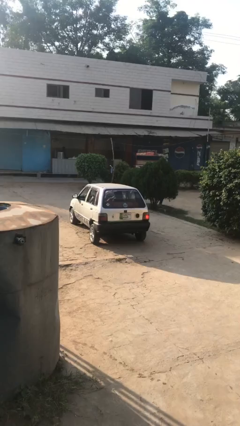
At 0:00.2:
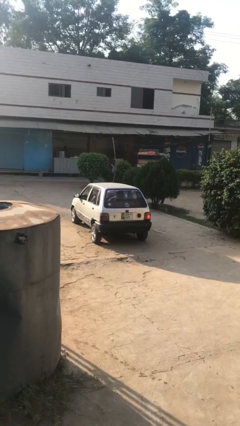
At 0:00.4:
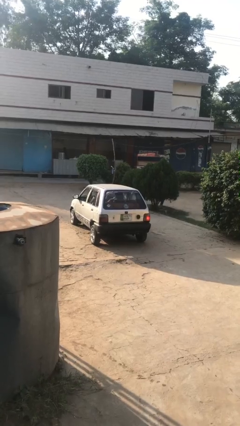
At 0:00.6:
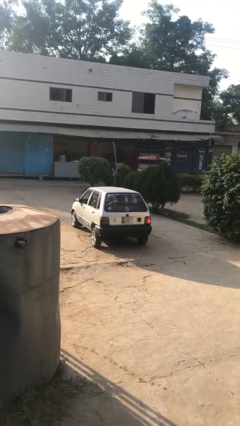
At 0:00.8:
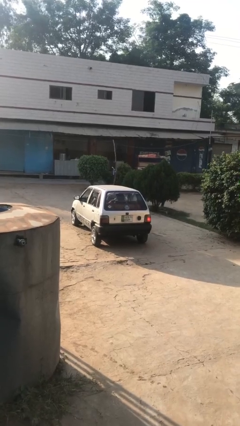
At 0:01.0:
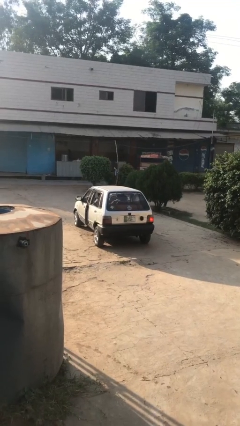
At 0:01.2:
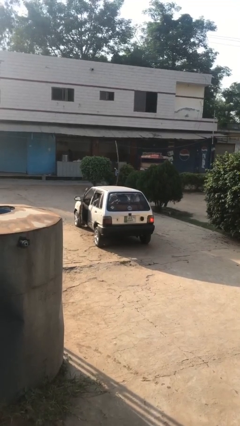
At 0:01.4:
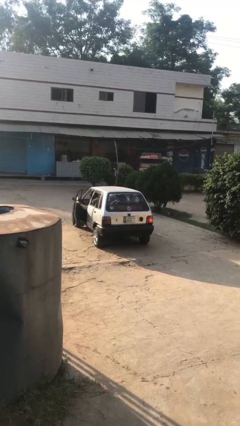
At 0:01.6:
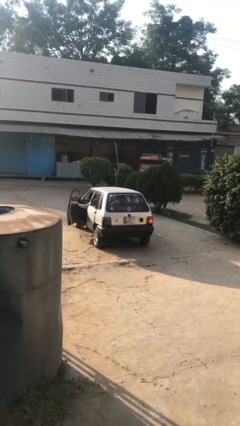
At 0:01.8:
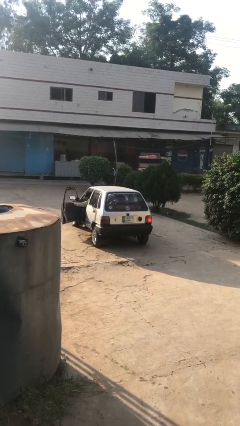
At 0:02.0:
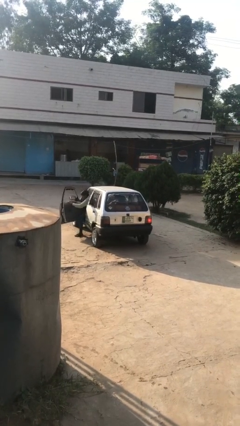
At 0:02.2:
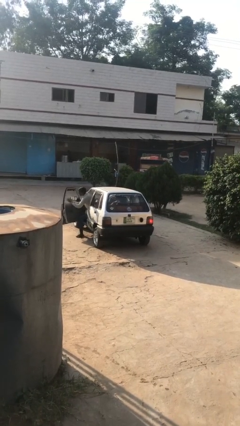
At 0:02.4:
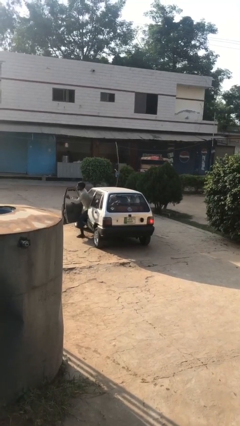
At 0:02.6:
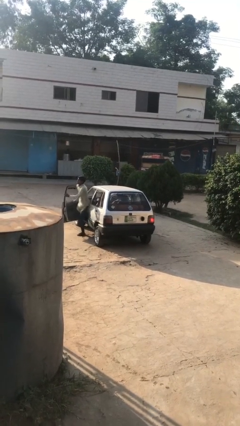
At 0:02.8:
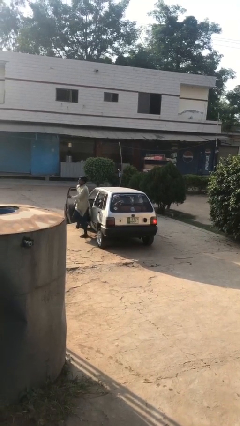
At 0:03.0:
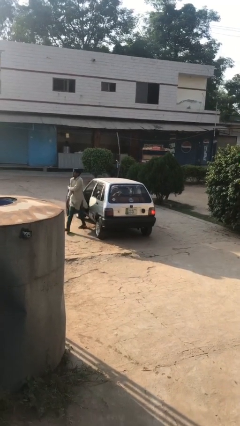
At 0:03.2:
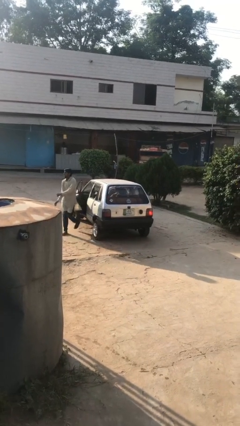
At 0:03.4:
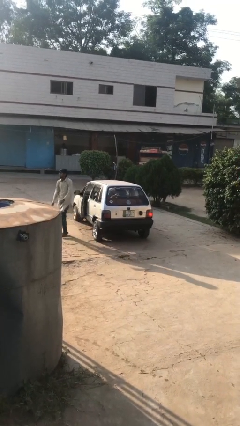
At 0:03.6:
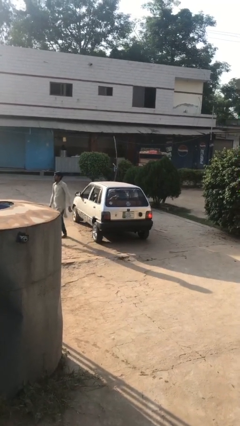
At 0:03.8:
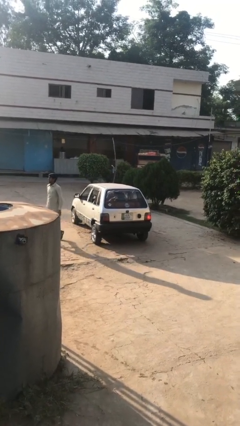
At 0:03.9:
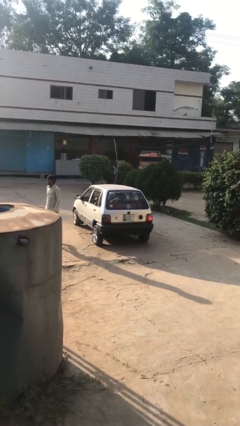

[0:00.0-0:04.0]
car drops off person

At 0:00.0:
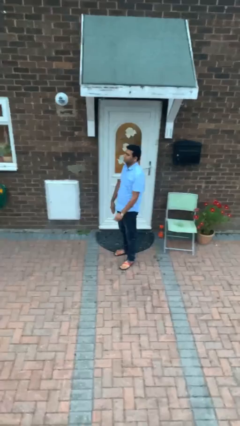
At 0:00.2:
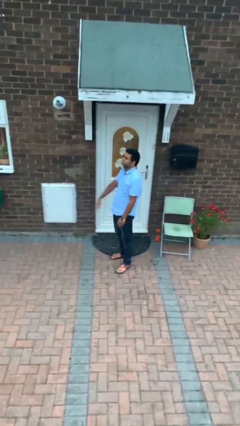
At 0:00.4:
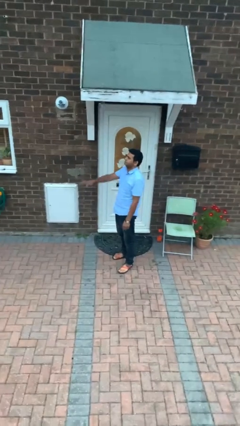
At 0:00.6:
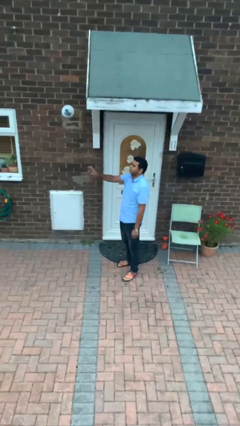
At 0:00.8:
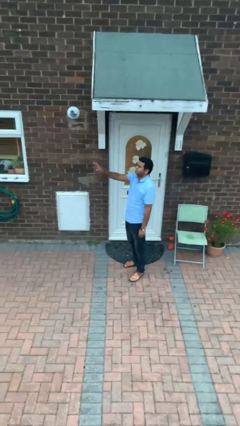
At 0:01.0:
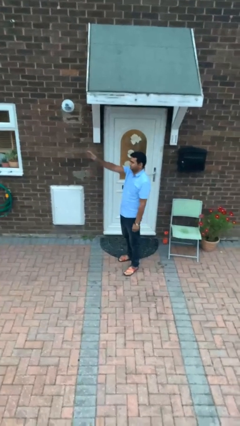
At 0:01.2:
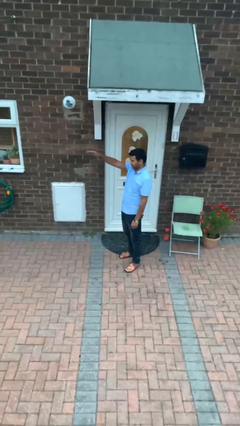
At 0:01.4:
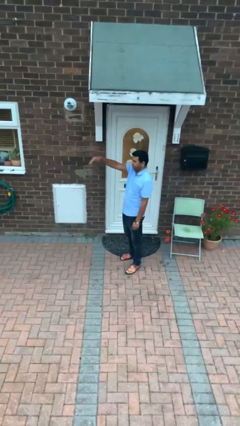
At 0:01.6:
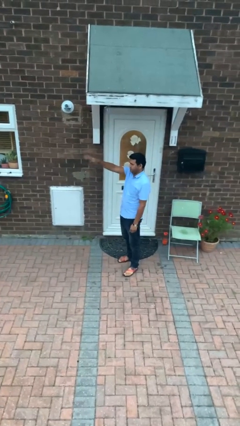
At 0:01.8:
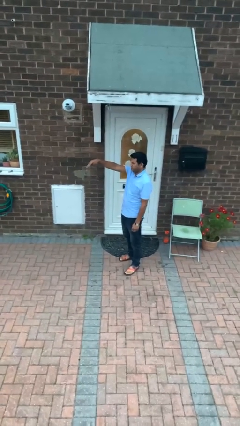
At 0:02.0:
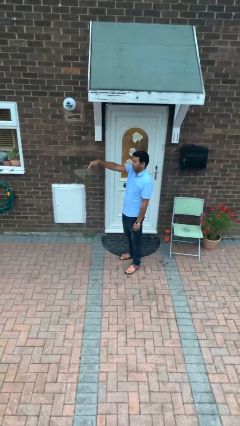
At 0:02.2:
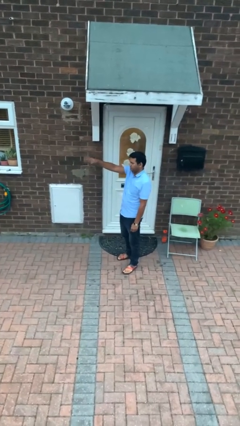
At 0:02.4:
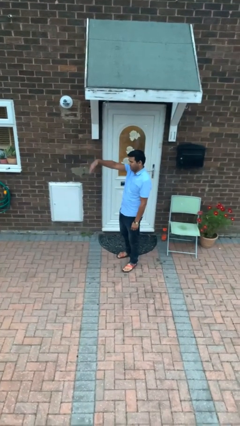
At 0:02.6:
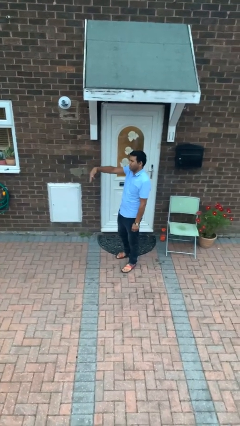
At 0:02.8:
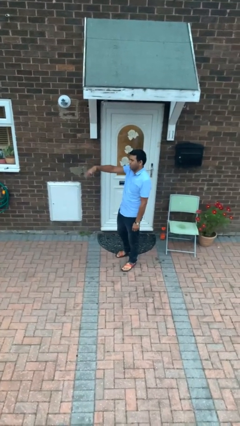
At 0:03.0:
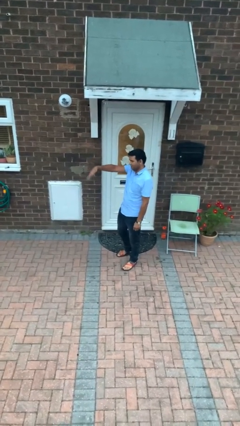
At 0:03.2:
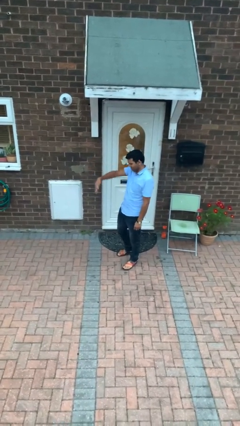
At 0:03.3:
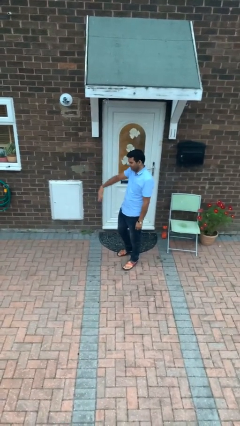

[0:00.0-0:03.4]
person gestures come here

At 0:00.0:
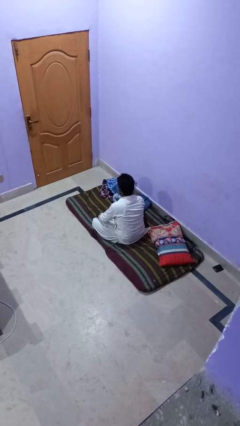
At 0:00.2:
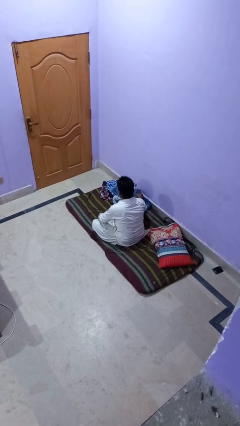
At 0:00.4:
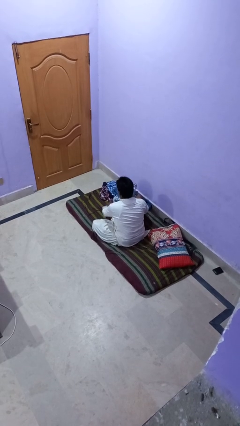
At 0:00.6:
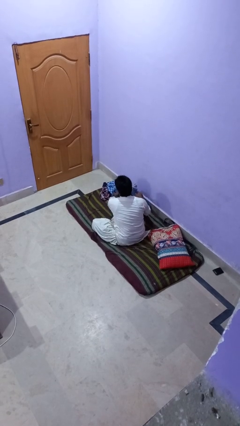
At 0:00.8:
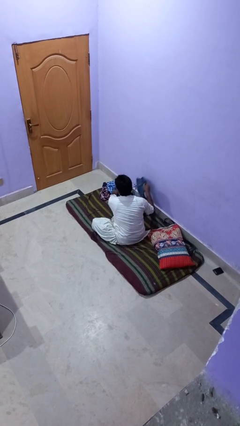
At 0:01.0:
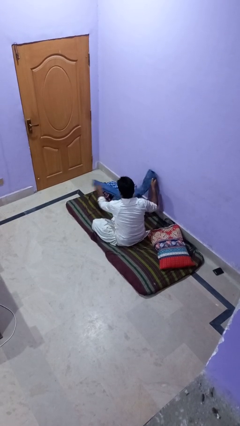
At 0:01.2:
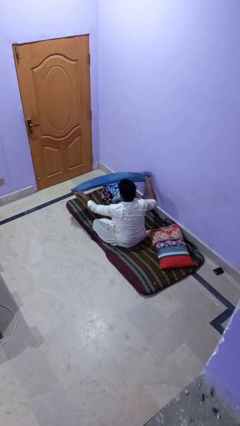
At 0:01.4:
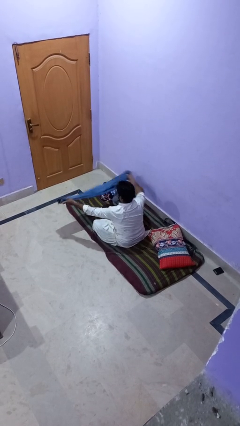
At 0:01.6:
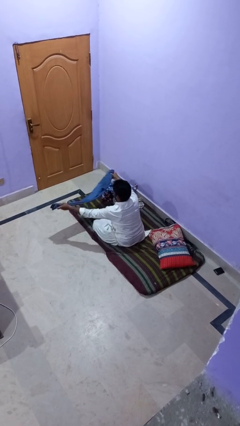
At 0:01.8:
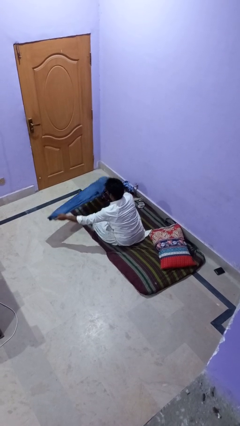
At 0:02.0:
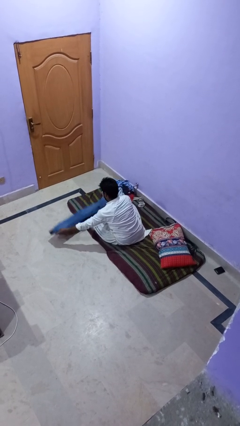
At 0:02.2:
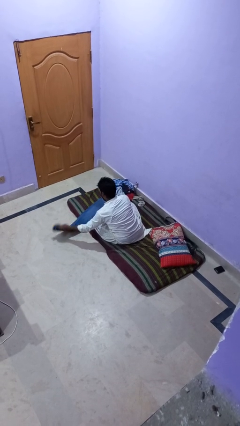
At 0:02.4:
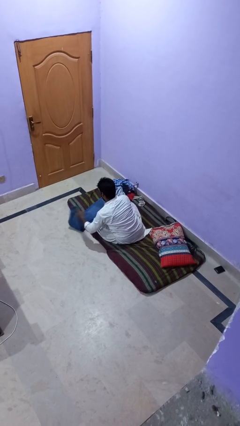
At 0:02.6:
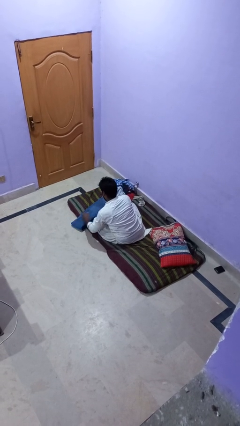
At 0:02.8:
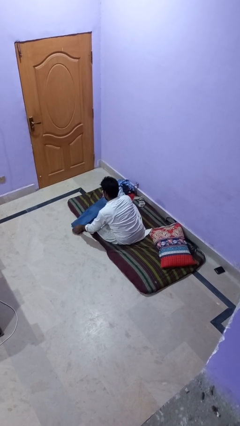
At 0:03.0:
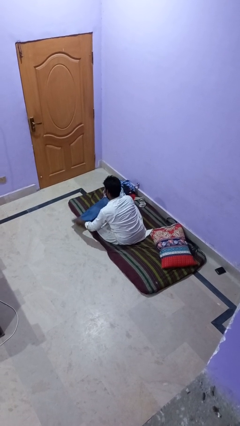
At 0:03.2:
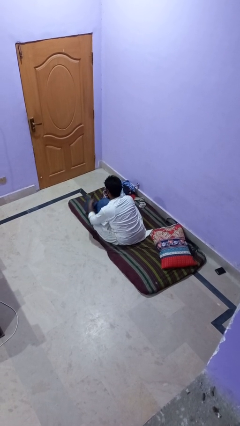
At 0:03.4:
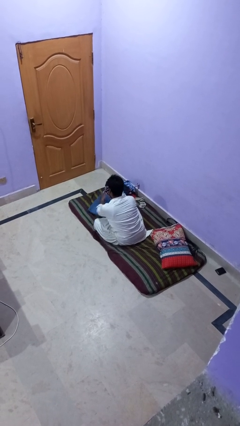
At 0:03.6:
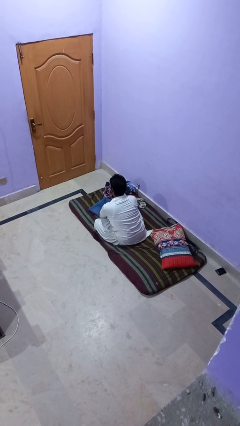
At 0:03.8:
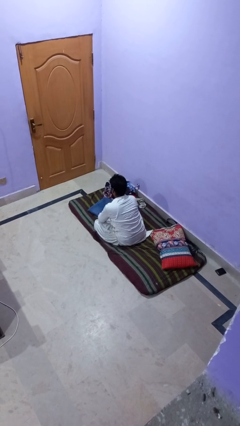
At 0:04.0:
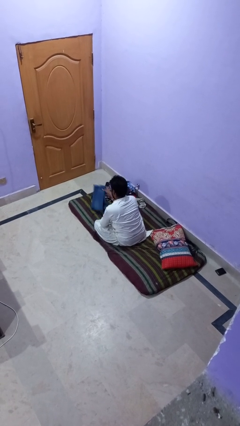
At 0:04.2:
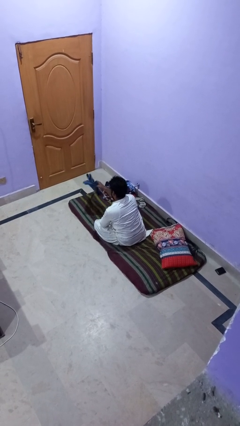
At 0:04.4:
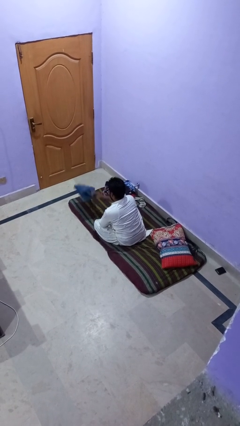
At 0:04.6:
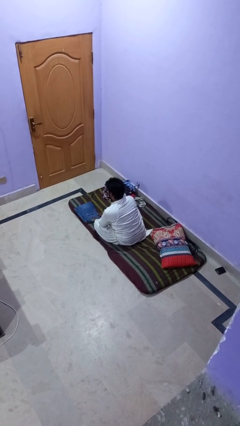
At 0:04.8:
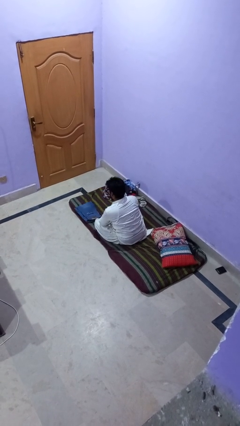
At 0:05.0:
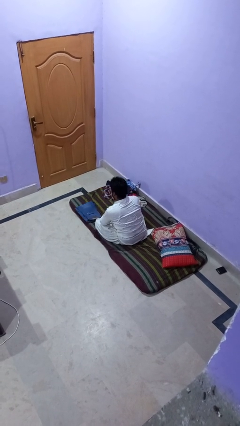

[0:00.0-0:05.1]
person folds pants

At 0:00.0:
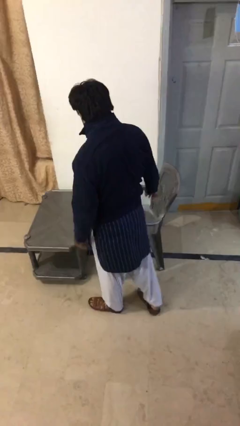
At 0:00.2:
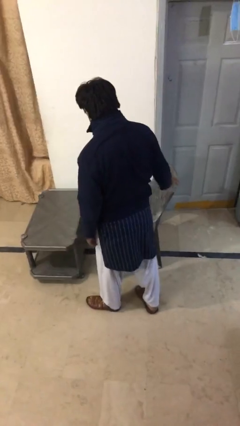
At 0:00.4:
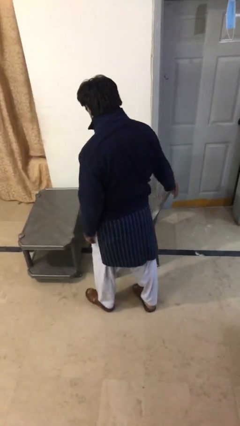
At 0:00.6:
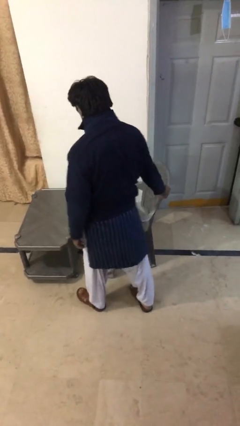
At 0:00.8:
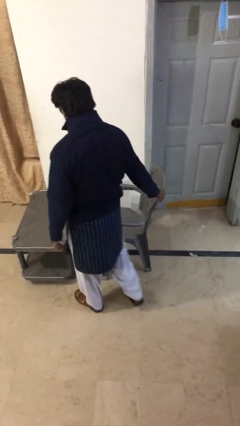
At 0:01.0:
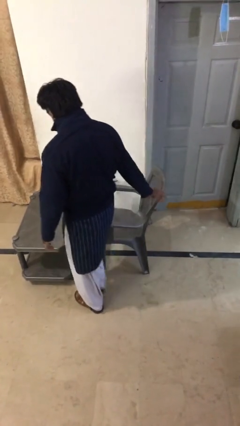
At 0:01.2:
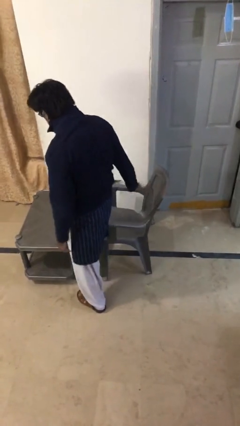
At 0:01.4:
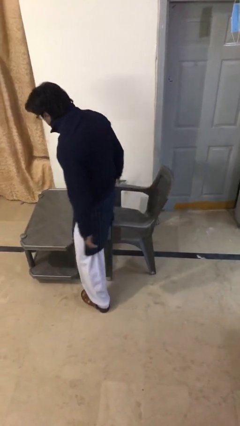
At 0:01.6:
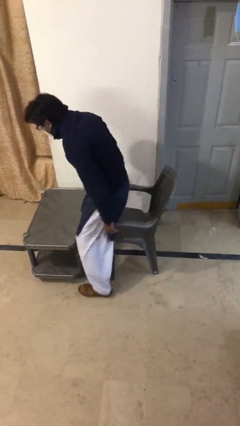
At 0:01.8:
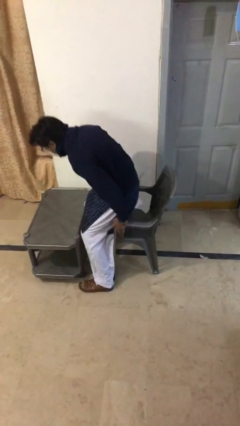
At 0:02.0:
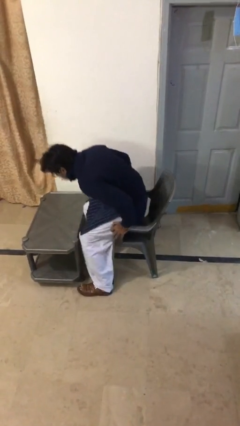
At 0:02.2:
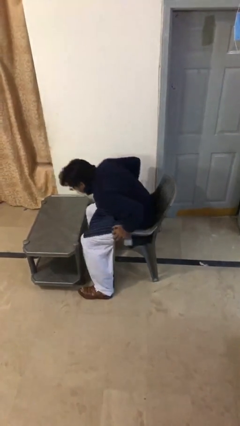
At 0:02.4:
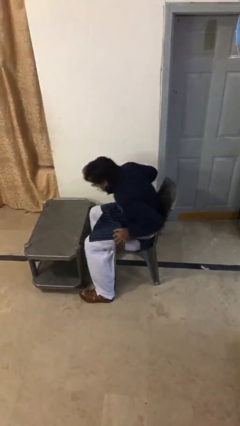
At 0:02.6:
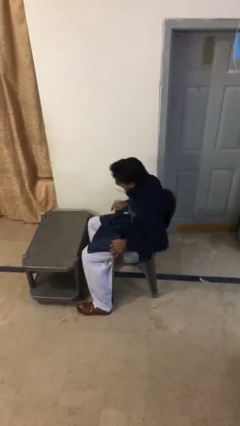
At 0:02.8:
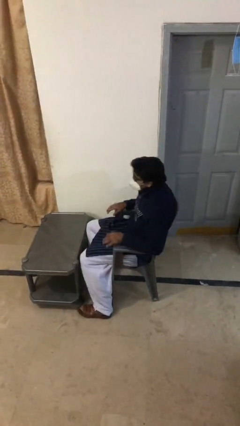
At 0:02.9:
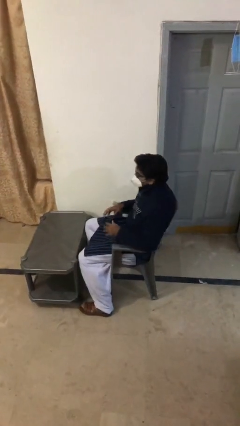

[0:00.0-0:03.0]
person sits down

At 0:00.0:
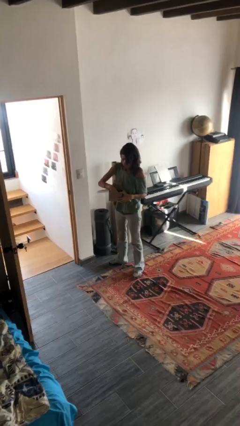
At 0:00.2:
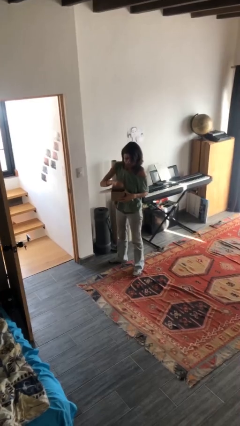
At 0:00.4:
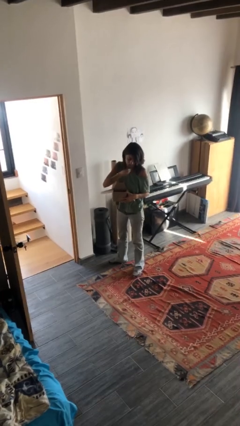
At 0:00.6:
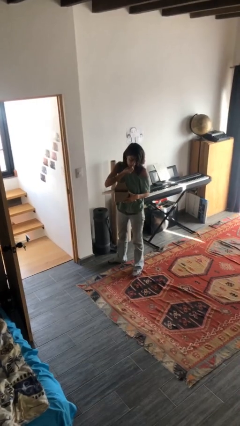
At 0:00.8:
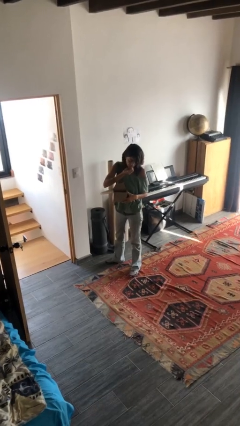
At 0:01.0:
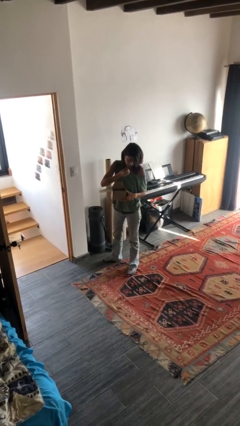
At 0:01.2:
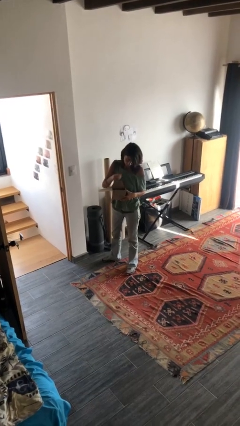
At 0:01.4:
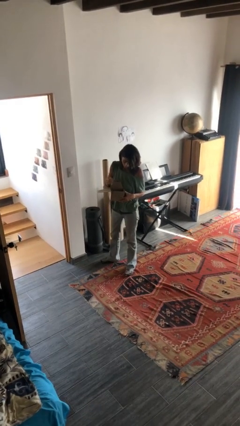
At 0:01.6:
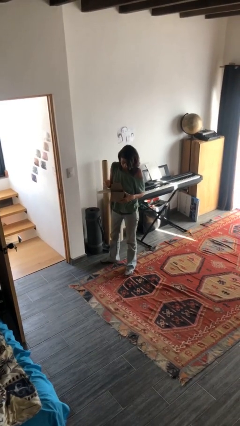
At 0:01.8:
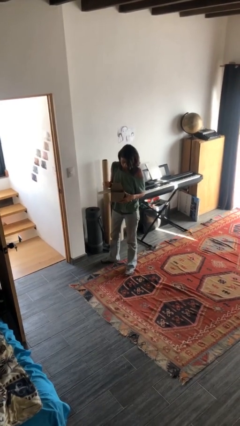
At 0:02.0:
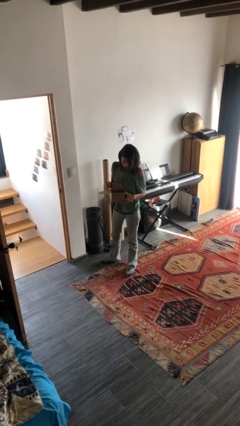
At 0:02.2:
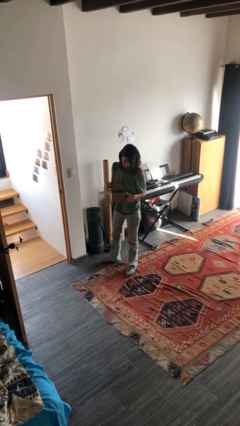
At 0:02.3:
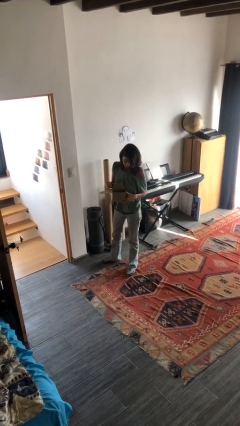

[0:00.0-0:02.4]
person eats snack from bag
